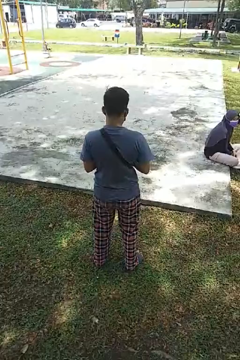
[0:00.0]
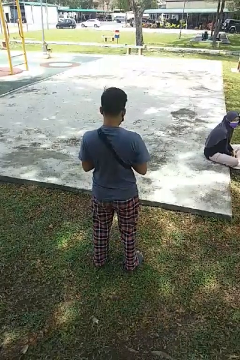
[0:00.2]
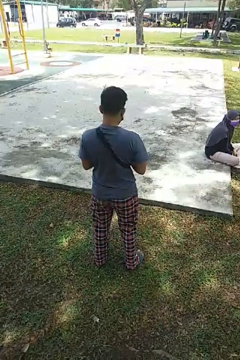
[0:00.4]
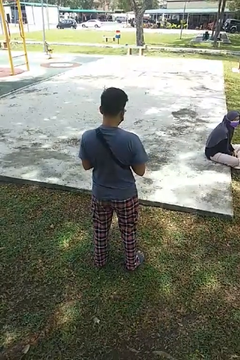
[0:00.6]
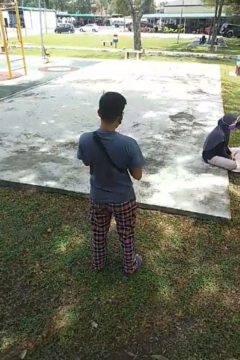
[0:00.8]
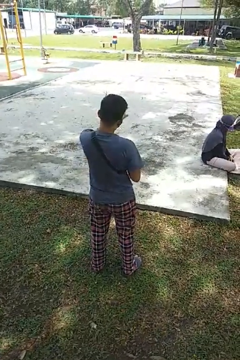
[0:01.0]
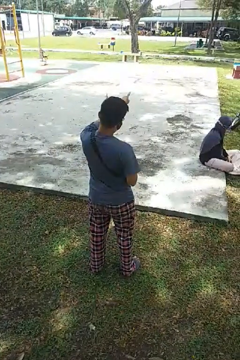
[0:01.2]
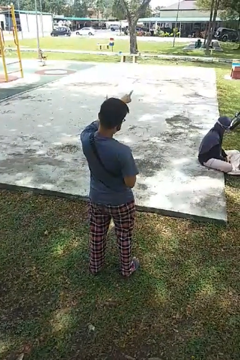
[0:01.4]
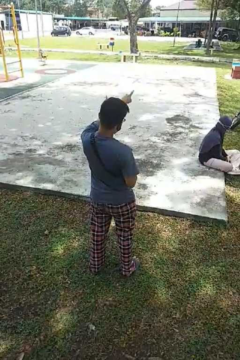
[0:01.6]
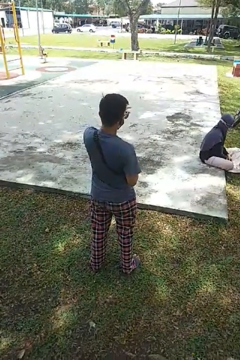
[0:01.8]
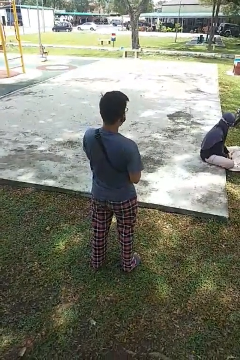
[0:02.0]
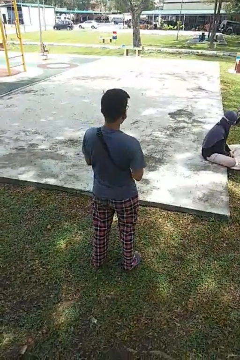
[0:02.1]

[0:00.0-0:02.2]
person points at person

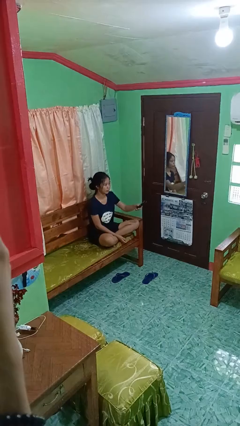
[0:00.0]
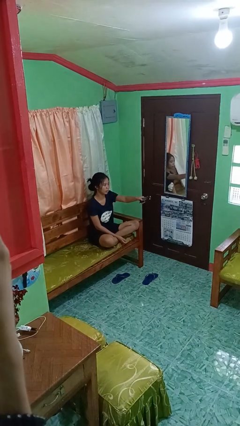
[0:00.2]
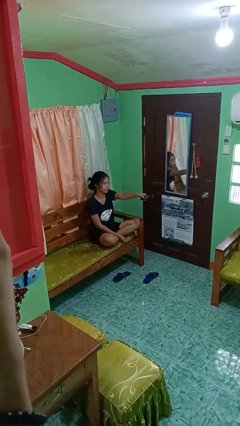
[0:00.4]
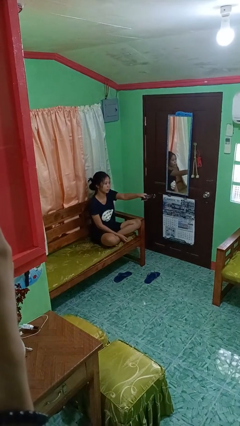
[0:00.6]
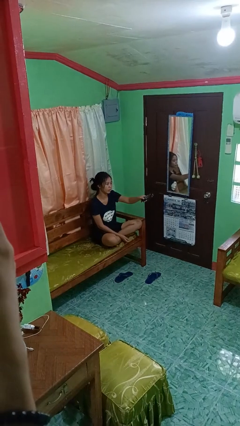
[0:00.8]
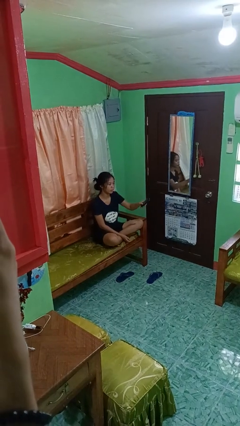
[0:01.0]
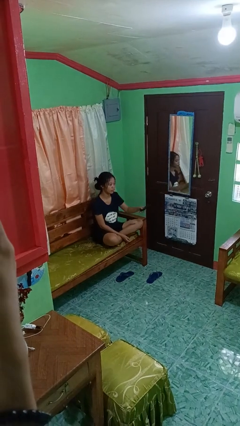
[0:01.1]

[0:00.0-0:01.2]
person uses television remote

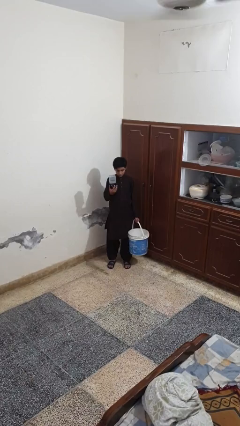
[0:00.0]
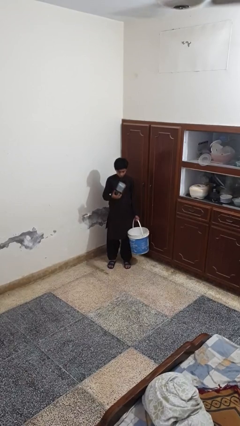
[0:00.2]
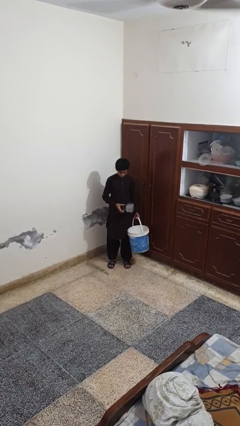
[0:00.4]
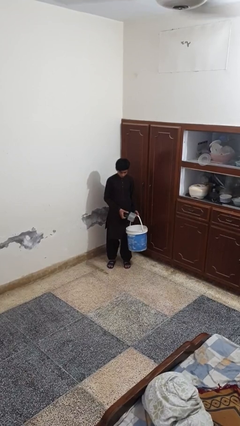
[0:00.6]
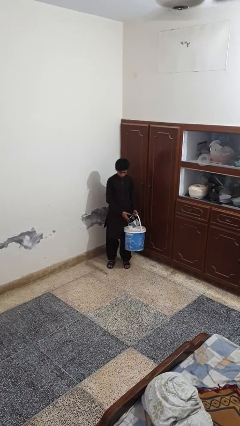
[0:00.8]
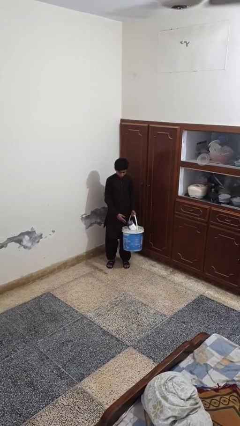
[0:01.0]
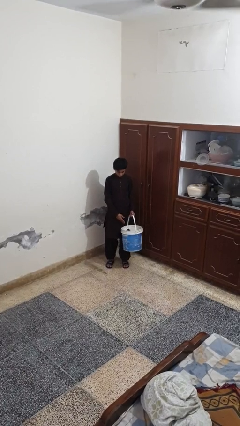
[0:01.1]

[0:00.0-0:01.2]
person puts object into basket

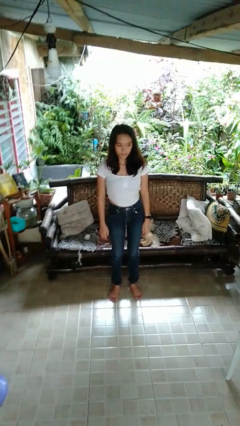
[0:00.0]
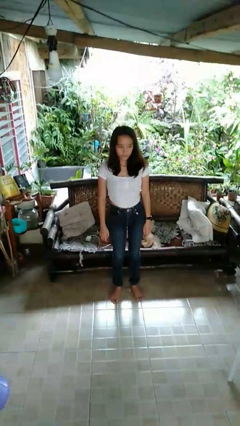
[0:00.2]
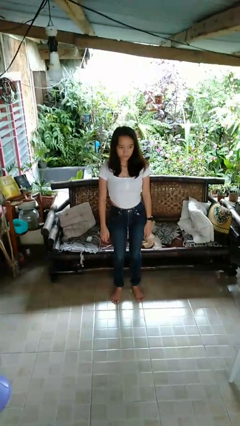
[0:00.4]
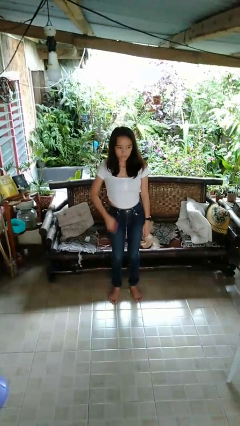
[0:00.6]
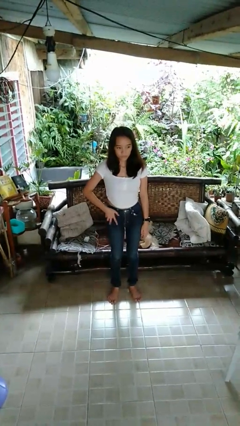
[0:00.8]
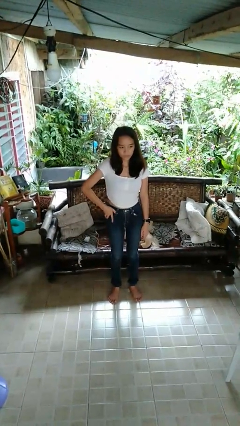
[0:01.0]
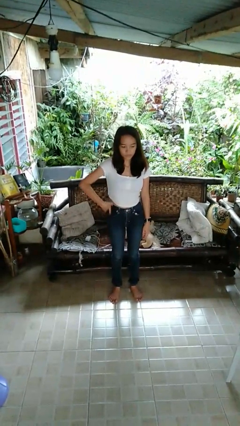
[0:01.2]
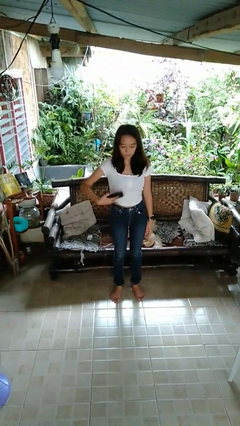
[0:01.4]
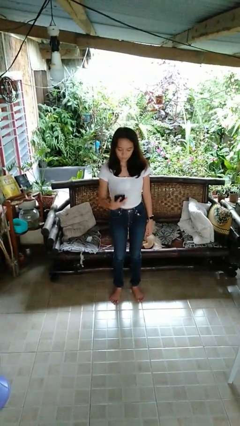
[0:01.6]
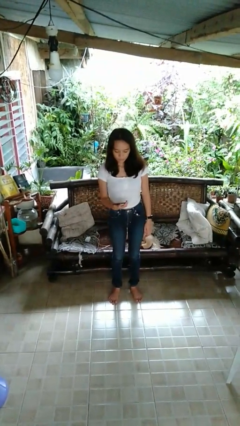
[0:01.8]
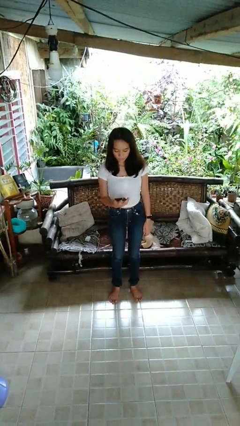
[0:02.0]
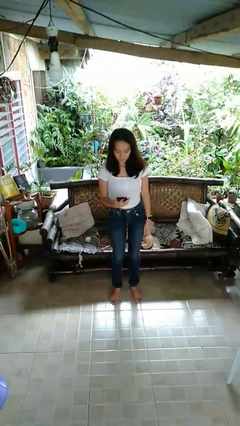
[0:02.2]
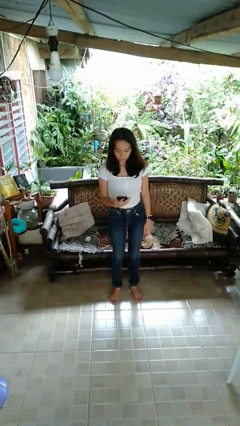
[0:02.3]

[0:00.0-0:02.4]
person takes phone from pocket

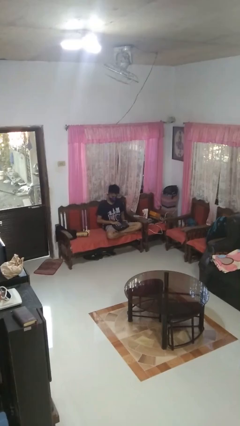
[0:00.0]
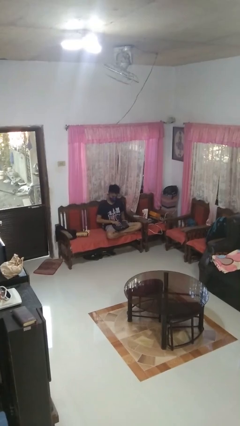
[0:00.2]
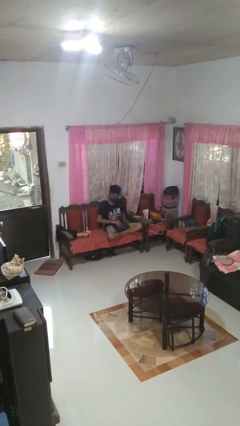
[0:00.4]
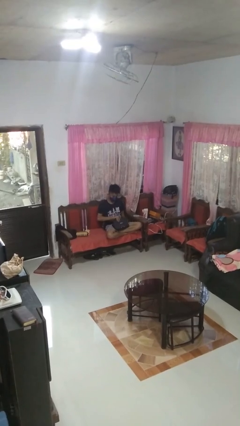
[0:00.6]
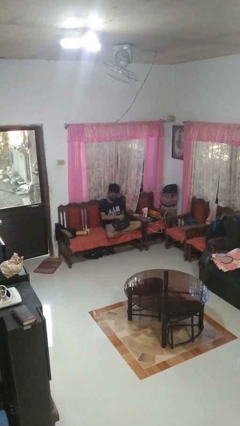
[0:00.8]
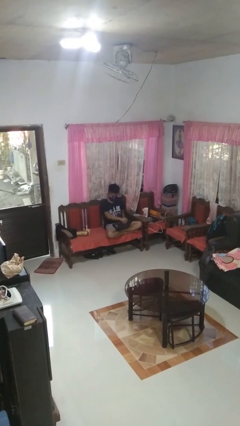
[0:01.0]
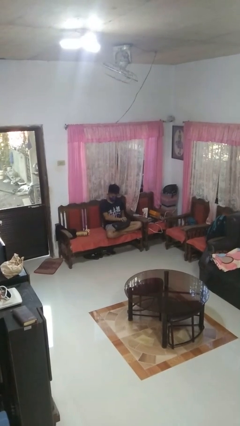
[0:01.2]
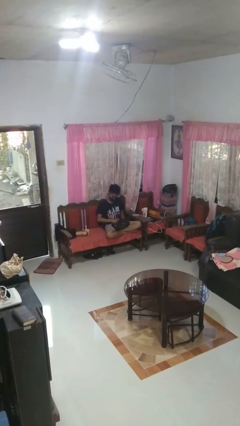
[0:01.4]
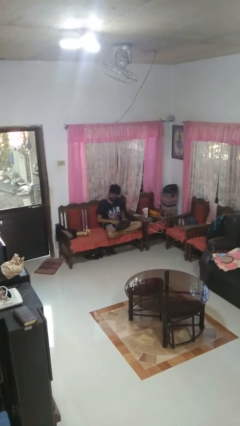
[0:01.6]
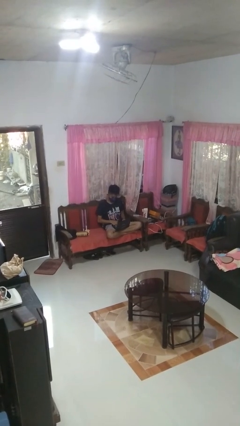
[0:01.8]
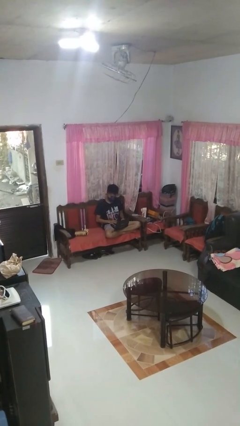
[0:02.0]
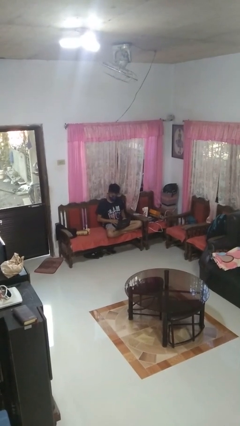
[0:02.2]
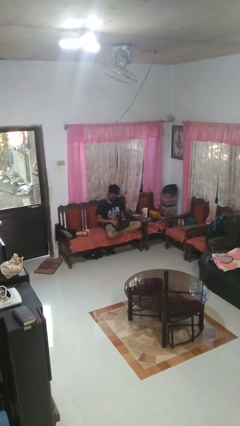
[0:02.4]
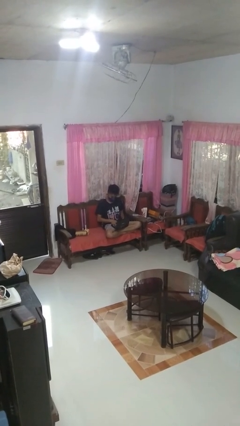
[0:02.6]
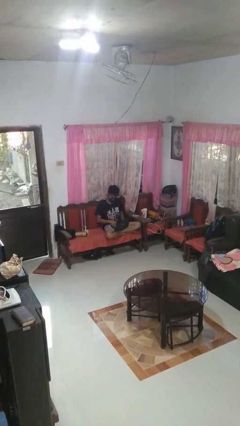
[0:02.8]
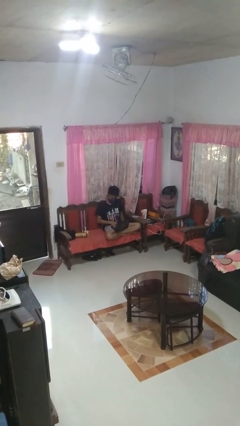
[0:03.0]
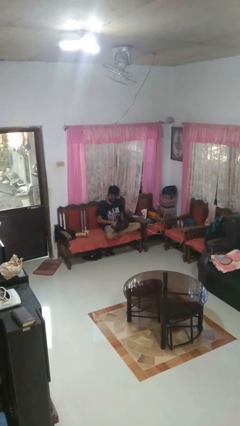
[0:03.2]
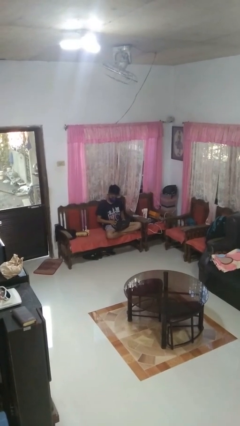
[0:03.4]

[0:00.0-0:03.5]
person opens laptop

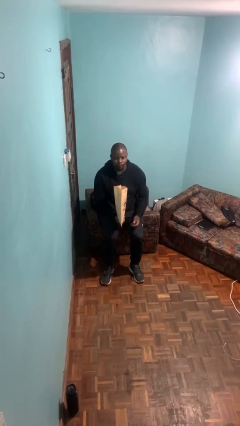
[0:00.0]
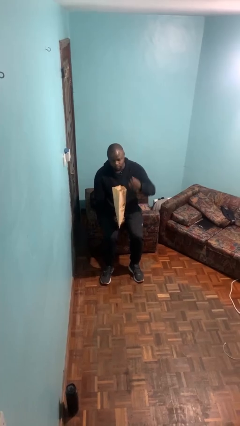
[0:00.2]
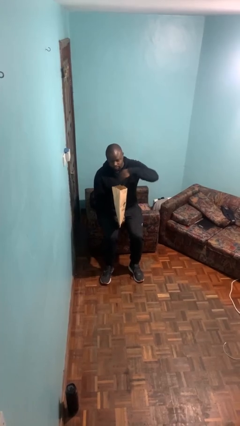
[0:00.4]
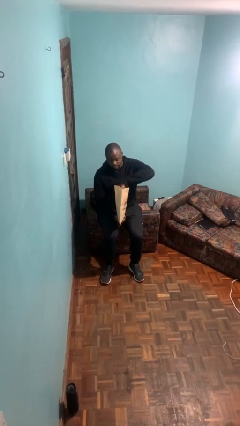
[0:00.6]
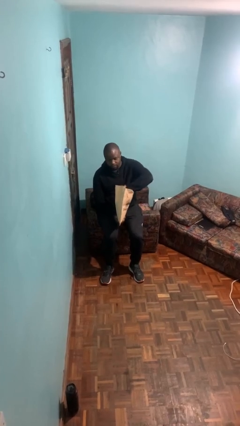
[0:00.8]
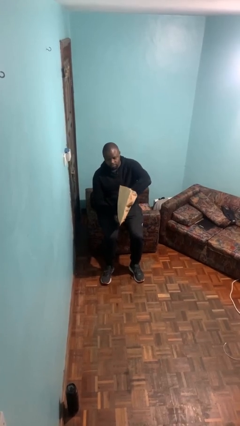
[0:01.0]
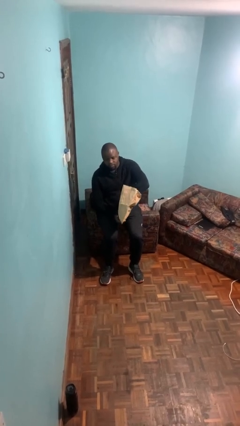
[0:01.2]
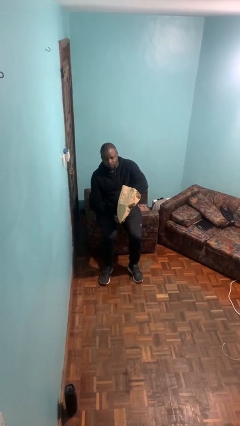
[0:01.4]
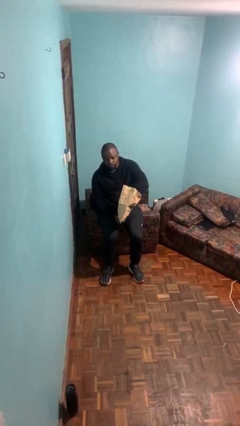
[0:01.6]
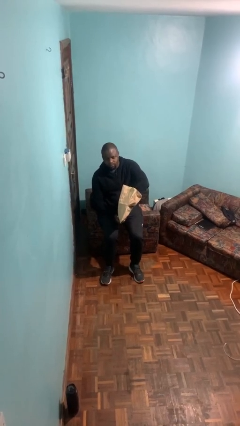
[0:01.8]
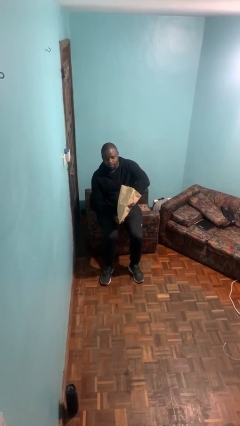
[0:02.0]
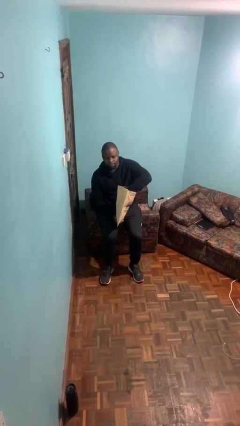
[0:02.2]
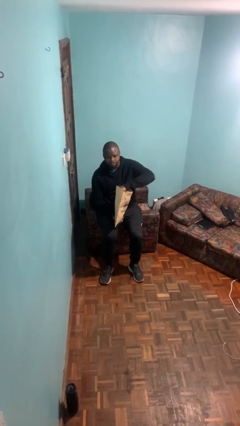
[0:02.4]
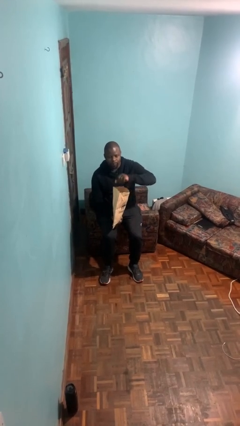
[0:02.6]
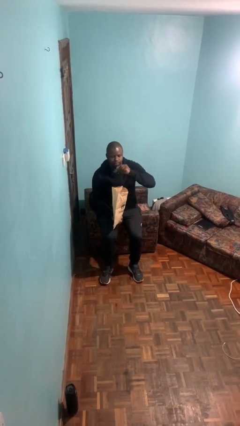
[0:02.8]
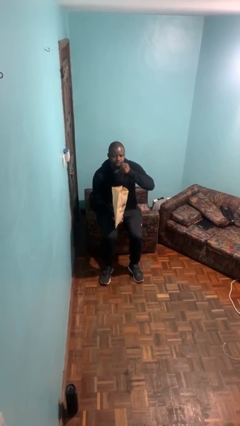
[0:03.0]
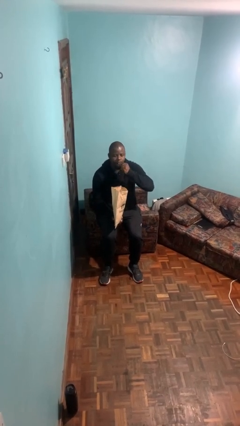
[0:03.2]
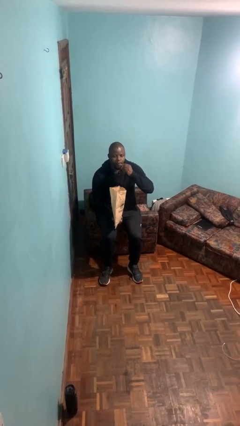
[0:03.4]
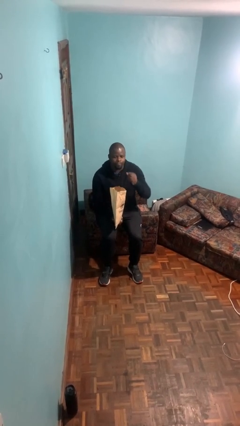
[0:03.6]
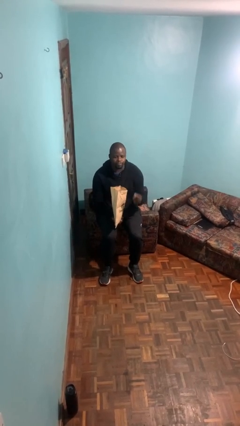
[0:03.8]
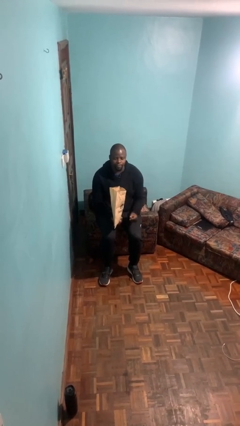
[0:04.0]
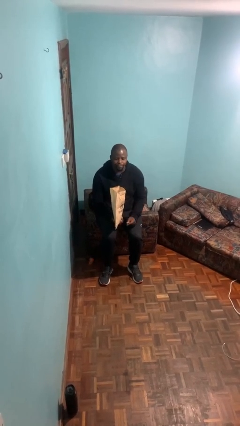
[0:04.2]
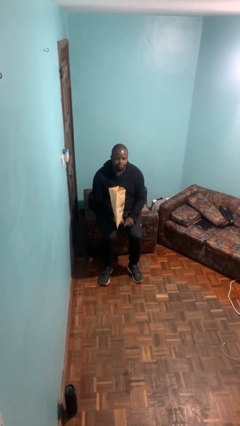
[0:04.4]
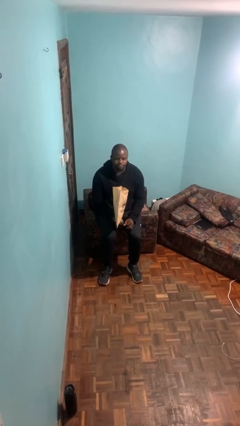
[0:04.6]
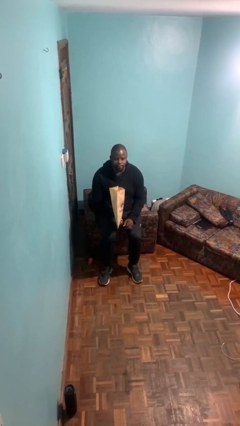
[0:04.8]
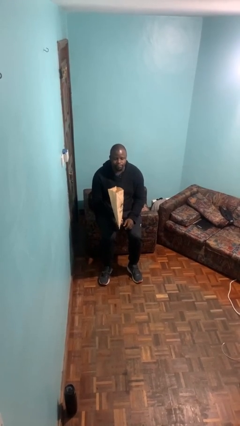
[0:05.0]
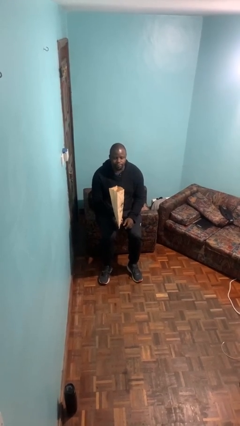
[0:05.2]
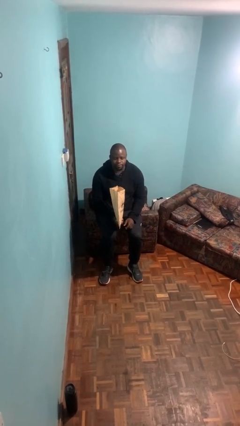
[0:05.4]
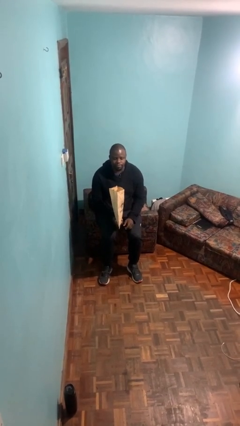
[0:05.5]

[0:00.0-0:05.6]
person eats snack from bag

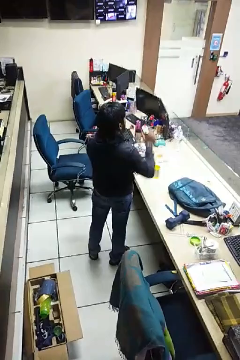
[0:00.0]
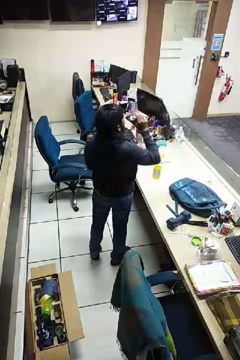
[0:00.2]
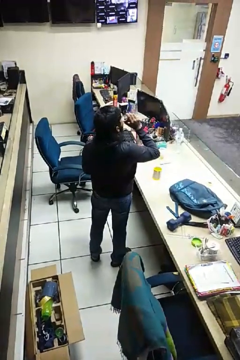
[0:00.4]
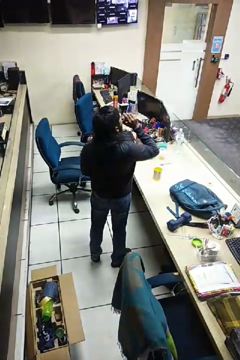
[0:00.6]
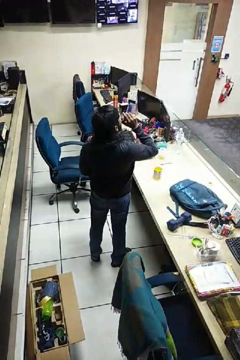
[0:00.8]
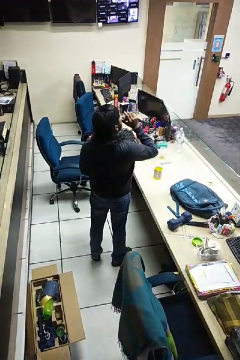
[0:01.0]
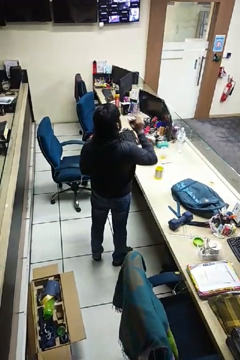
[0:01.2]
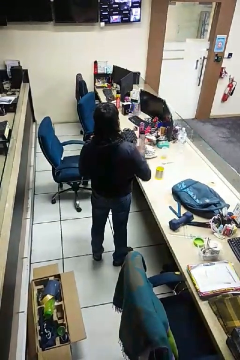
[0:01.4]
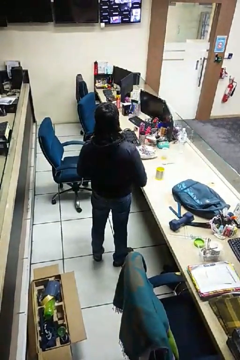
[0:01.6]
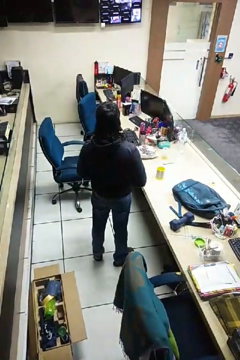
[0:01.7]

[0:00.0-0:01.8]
person drinks from beverage can
